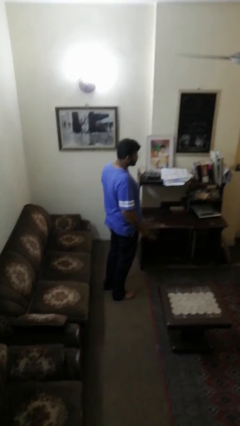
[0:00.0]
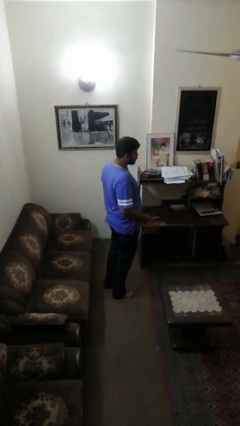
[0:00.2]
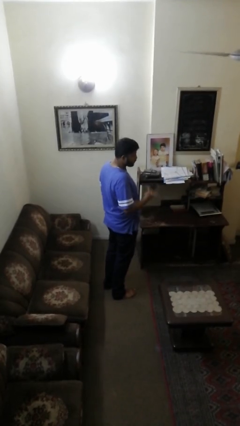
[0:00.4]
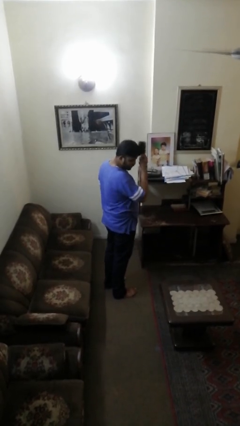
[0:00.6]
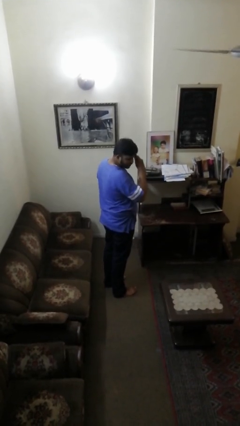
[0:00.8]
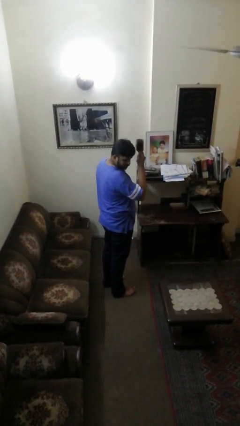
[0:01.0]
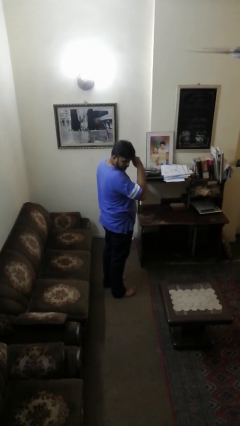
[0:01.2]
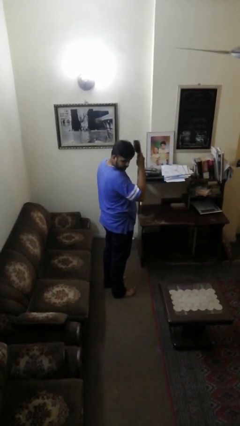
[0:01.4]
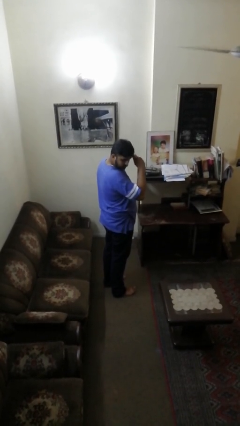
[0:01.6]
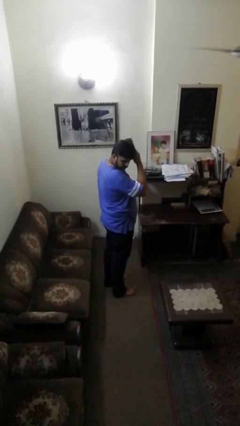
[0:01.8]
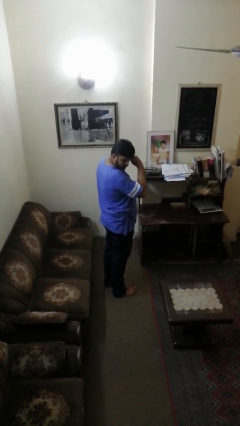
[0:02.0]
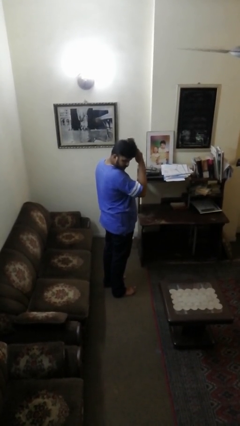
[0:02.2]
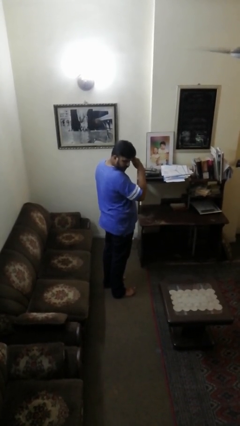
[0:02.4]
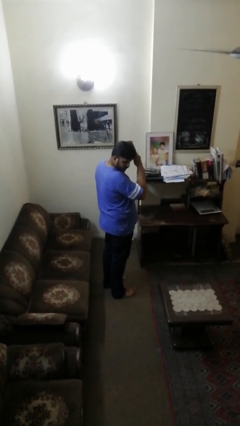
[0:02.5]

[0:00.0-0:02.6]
person brushes hair

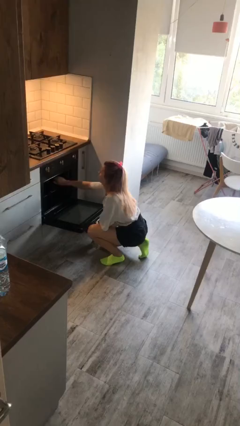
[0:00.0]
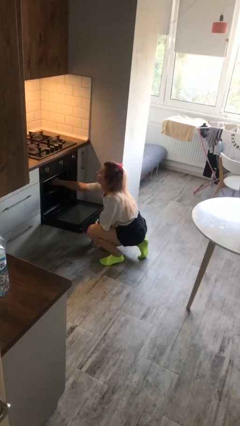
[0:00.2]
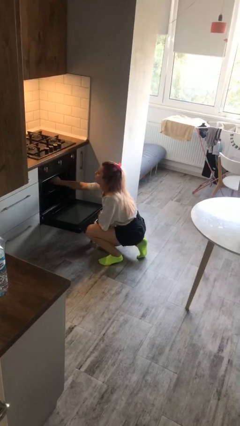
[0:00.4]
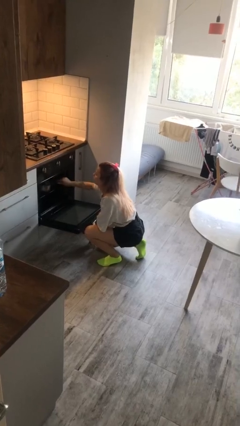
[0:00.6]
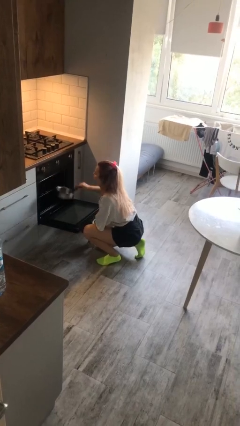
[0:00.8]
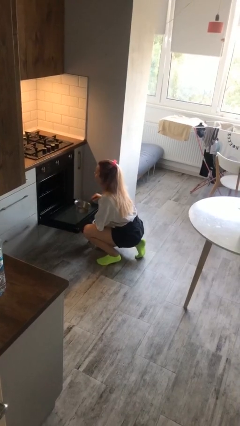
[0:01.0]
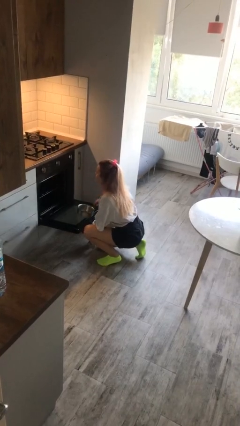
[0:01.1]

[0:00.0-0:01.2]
person takes object from oven

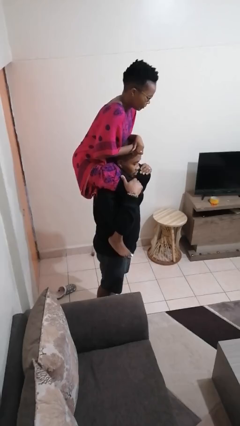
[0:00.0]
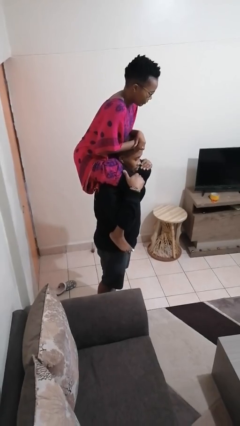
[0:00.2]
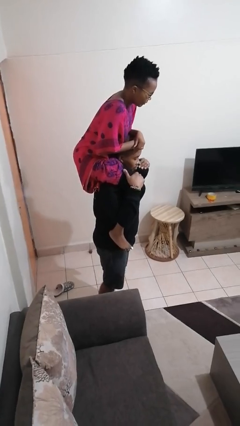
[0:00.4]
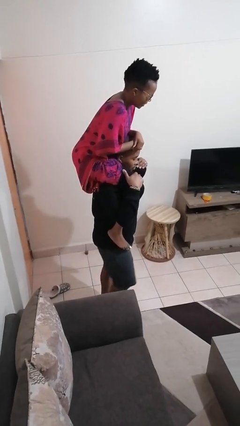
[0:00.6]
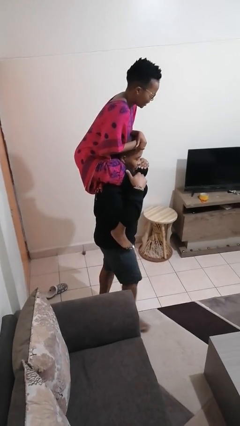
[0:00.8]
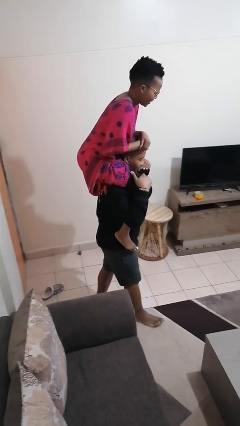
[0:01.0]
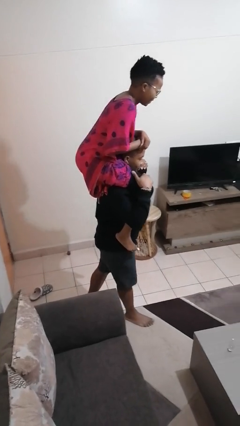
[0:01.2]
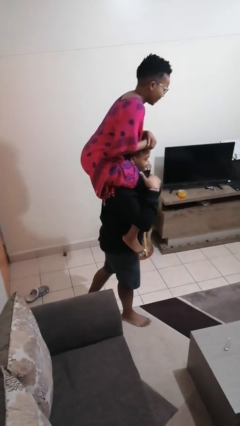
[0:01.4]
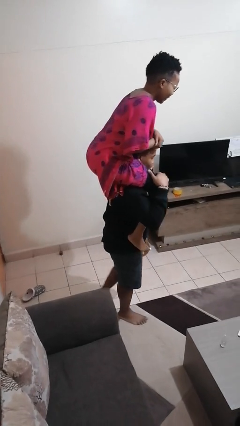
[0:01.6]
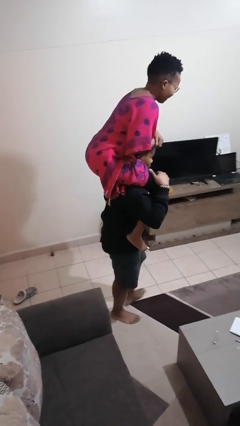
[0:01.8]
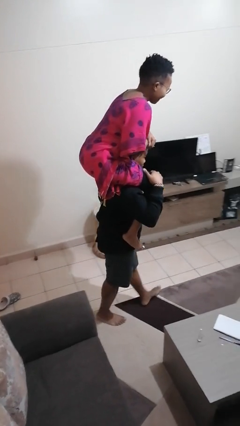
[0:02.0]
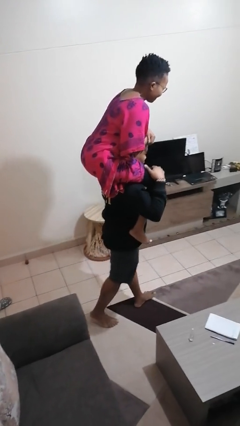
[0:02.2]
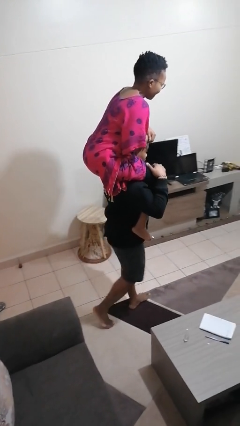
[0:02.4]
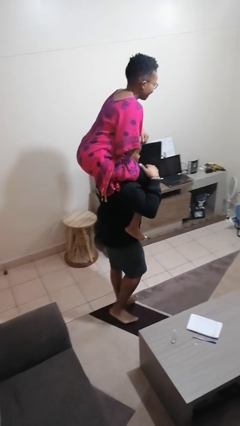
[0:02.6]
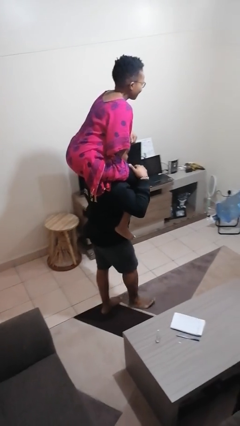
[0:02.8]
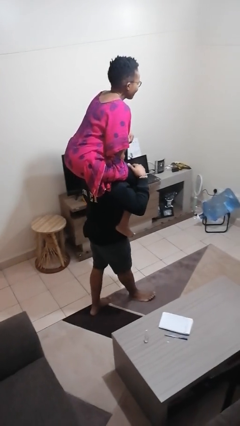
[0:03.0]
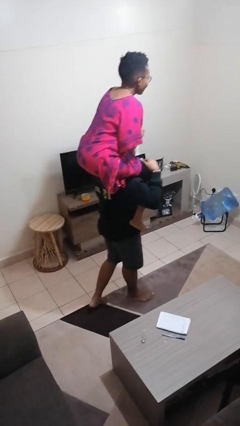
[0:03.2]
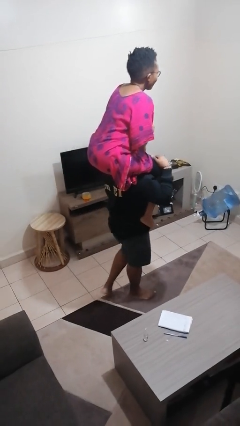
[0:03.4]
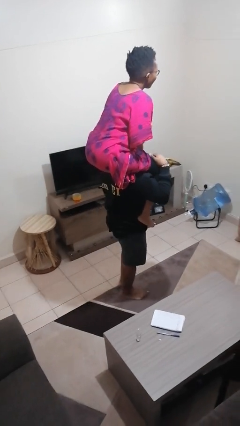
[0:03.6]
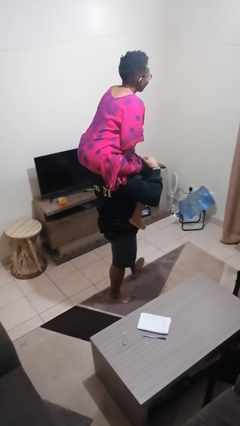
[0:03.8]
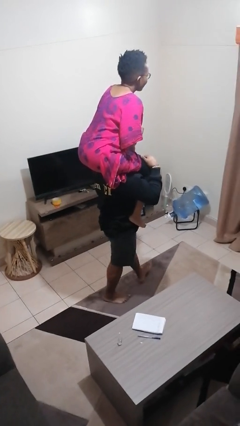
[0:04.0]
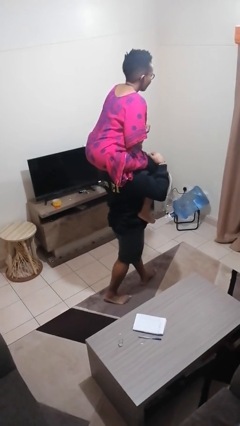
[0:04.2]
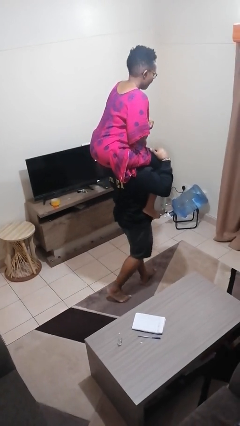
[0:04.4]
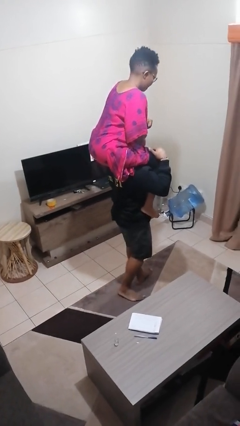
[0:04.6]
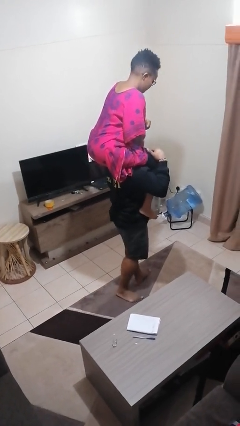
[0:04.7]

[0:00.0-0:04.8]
person carries person on shoulders

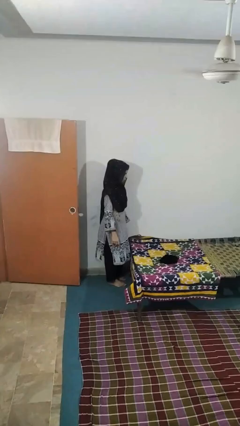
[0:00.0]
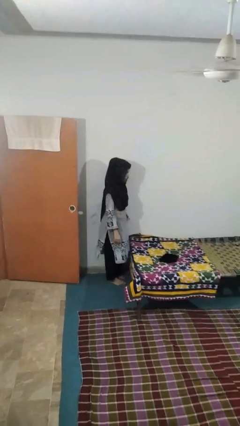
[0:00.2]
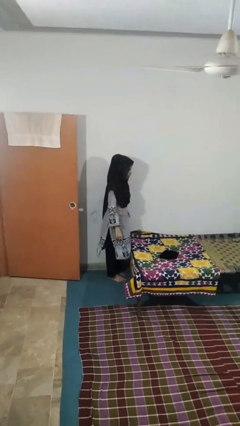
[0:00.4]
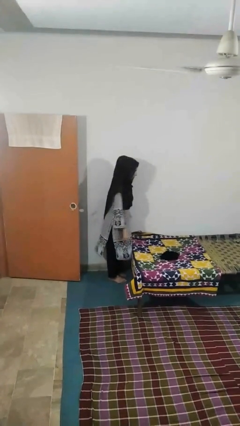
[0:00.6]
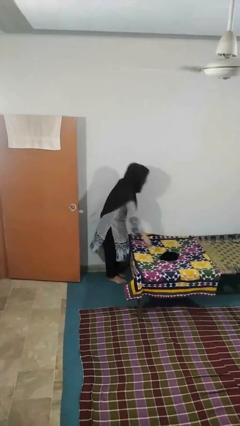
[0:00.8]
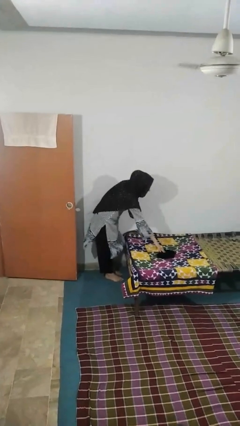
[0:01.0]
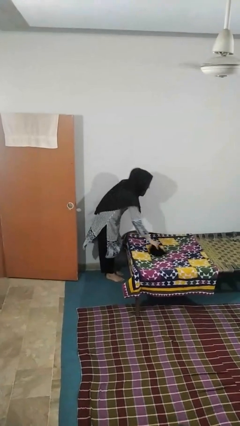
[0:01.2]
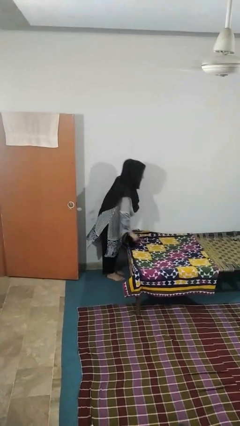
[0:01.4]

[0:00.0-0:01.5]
person picks up object from bed

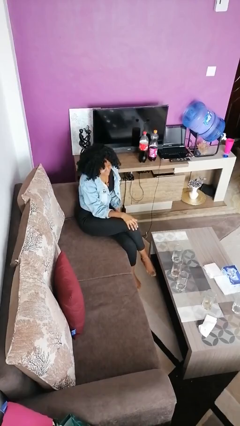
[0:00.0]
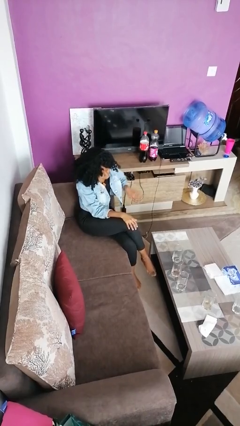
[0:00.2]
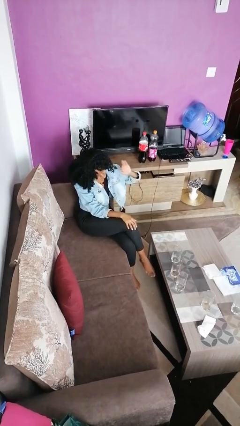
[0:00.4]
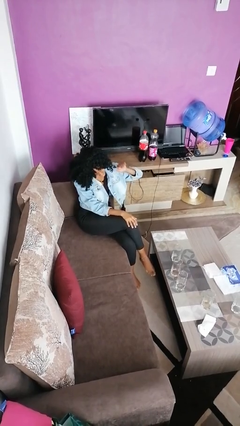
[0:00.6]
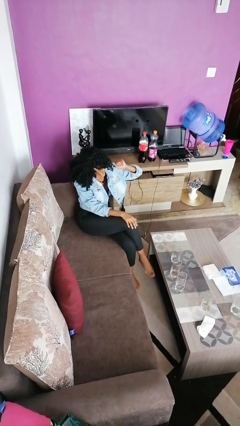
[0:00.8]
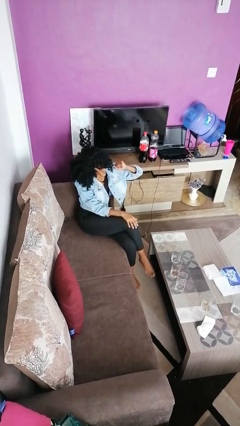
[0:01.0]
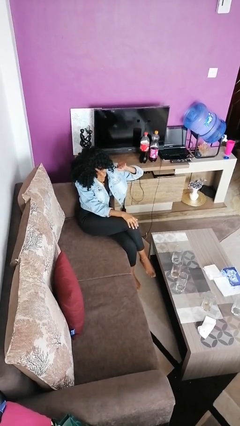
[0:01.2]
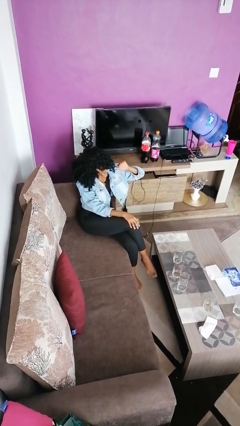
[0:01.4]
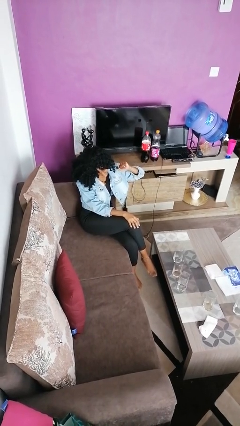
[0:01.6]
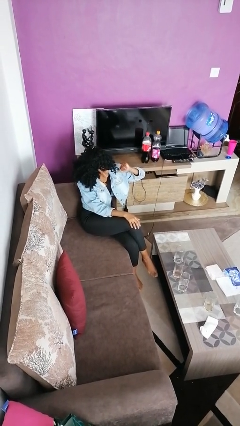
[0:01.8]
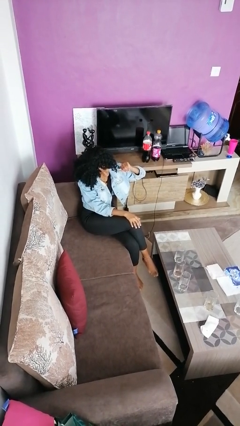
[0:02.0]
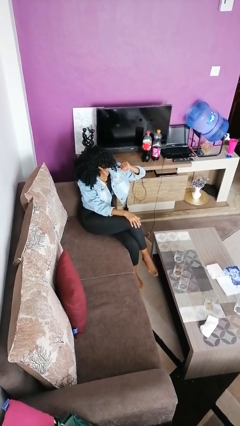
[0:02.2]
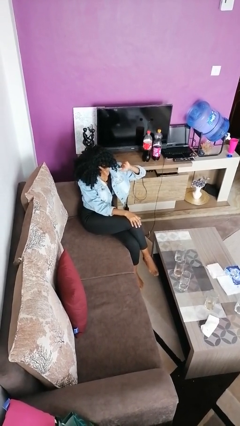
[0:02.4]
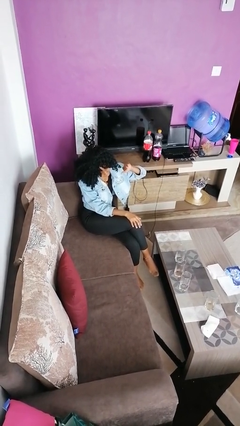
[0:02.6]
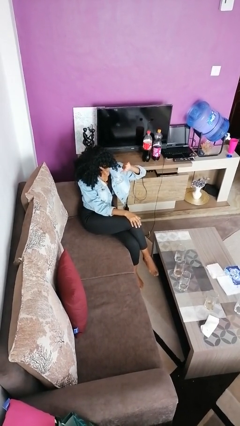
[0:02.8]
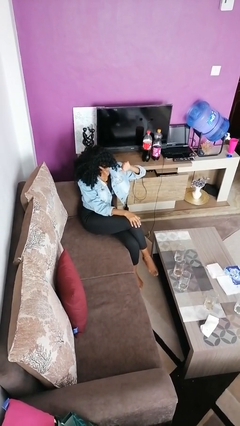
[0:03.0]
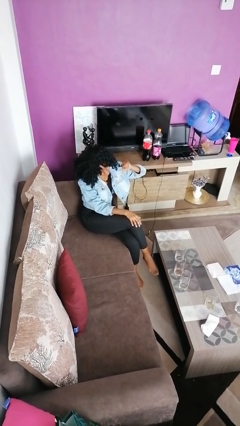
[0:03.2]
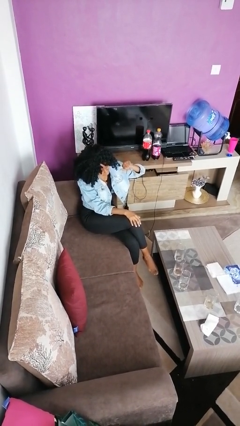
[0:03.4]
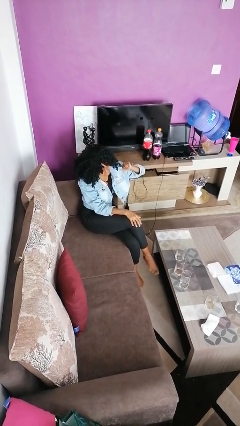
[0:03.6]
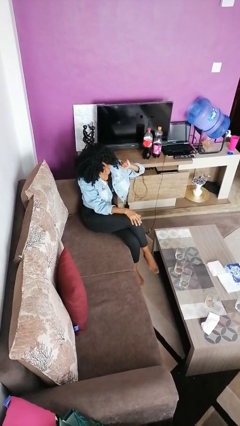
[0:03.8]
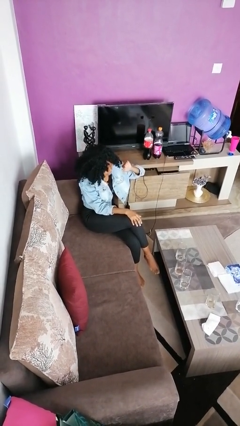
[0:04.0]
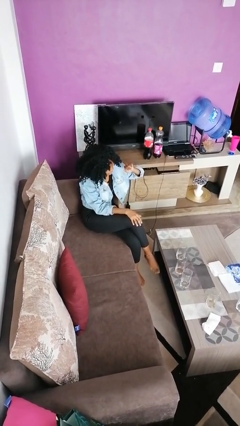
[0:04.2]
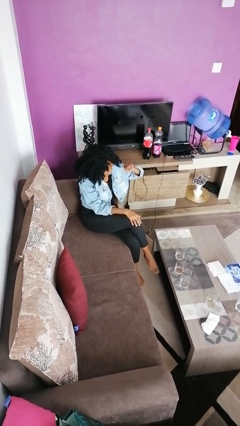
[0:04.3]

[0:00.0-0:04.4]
person gestures come here

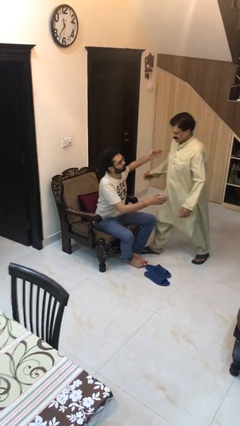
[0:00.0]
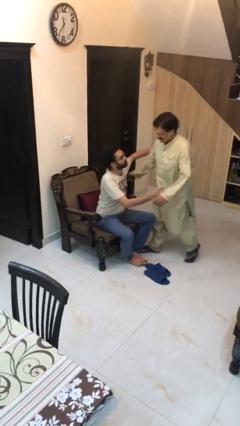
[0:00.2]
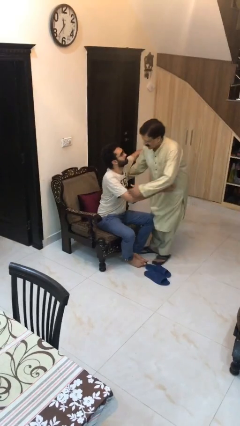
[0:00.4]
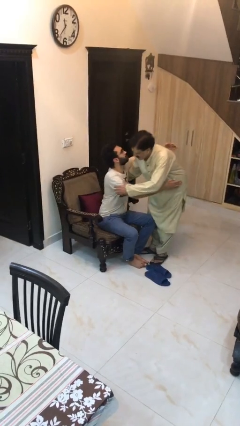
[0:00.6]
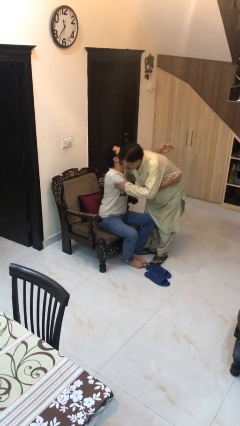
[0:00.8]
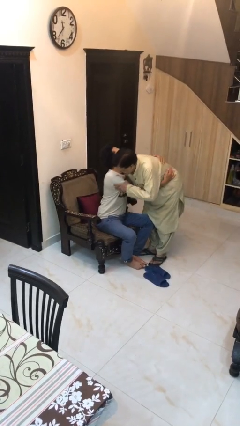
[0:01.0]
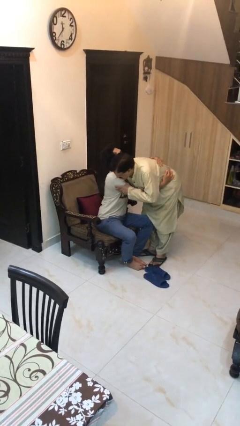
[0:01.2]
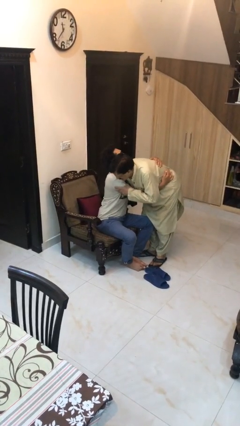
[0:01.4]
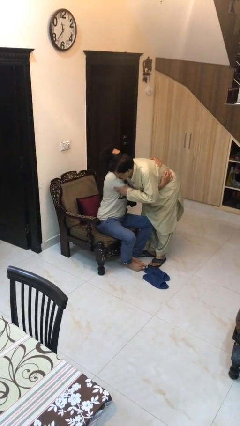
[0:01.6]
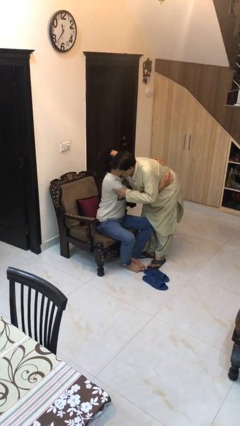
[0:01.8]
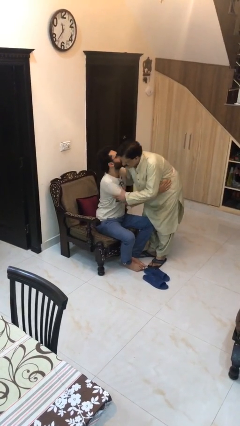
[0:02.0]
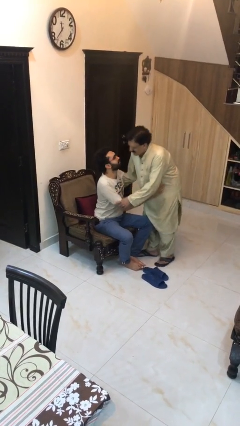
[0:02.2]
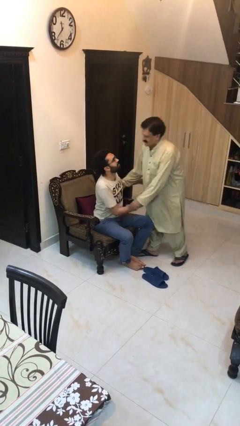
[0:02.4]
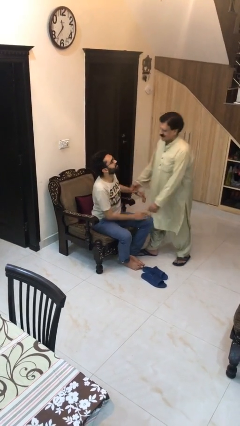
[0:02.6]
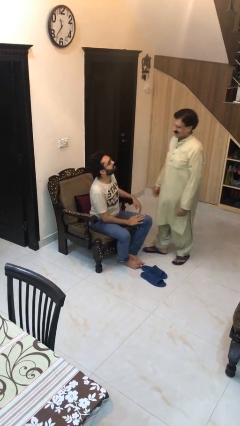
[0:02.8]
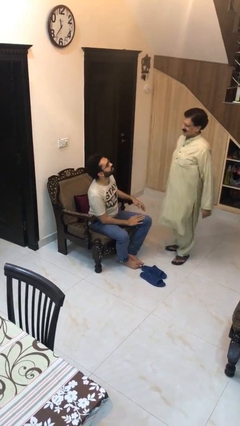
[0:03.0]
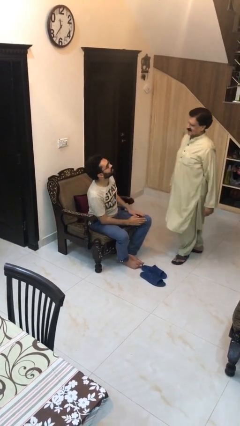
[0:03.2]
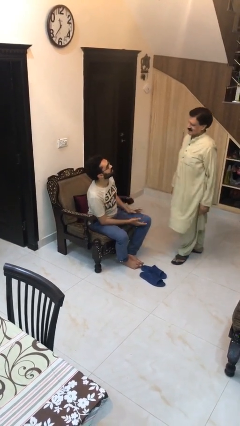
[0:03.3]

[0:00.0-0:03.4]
person embraces person
